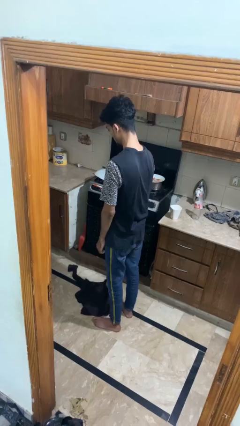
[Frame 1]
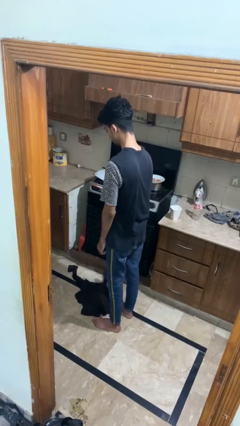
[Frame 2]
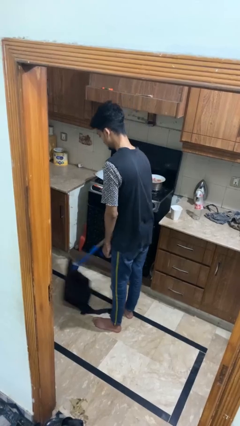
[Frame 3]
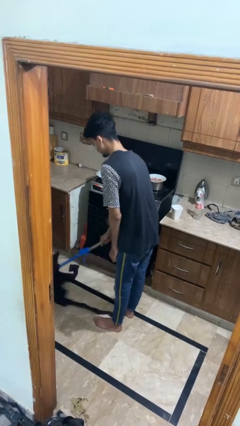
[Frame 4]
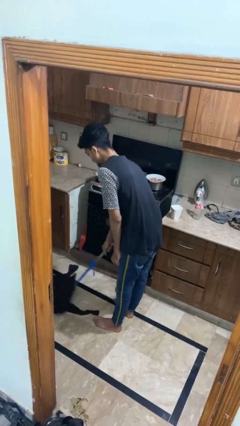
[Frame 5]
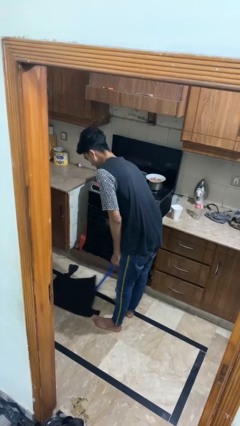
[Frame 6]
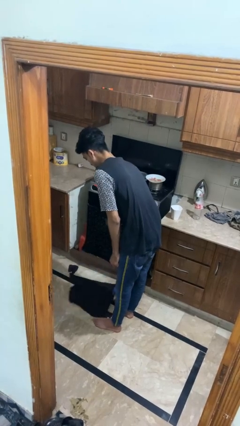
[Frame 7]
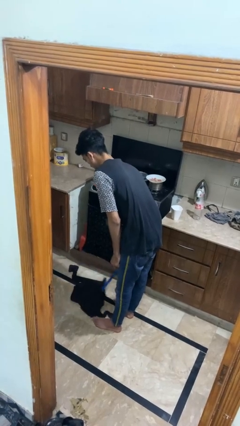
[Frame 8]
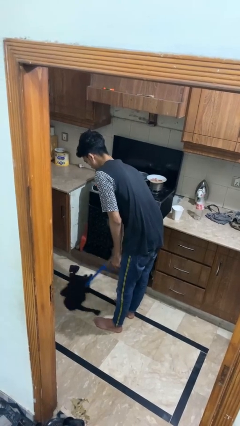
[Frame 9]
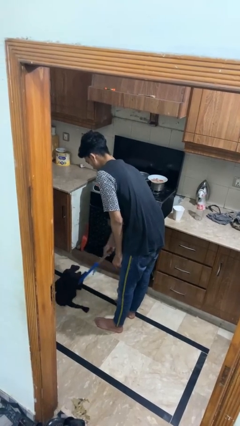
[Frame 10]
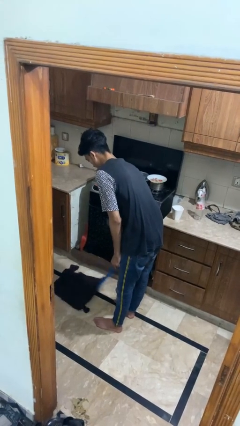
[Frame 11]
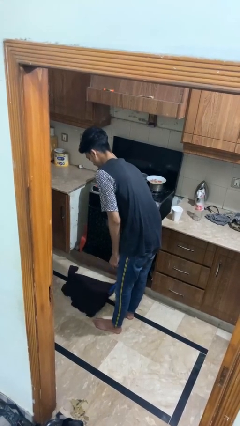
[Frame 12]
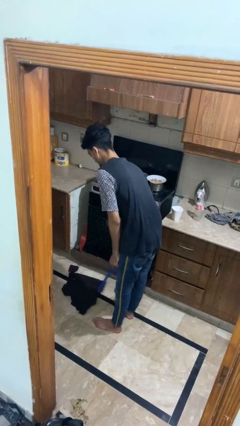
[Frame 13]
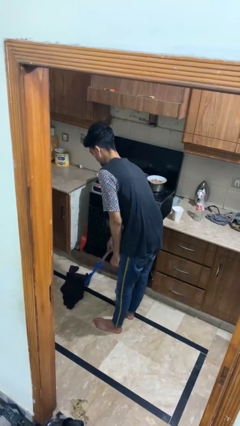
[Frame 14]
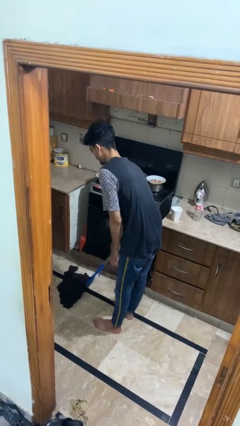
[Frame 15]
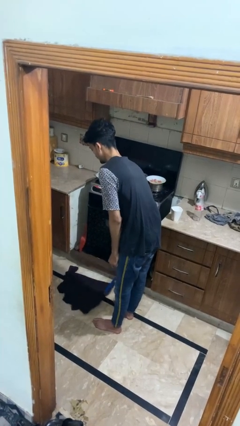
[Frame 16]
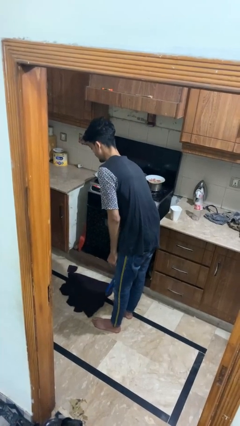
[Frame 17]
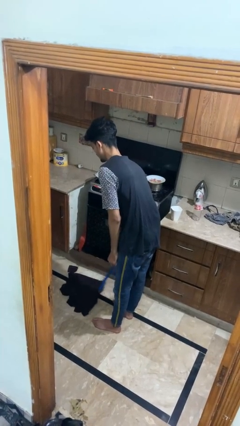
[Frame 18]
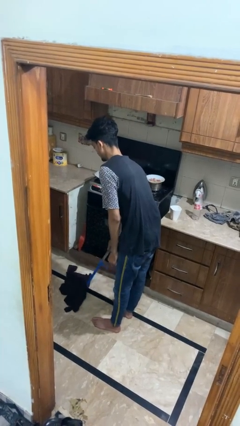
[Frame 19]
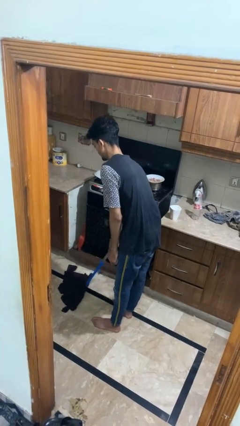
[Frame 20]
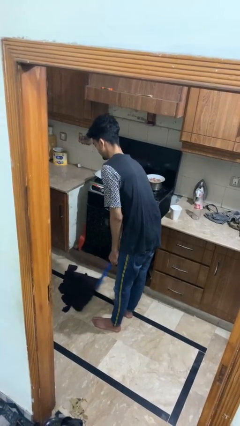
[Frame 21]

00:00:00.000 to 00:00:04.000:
person mops

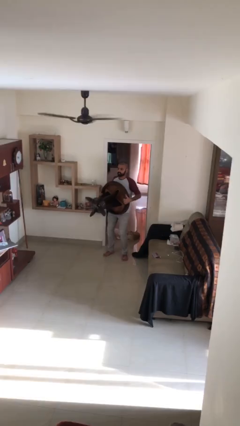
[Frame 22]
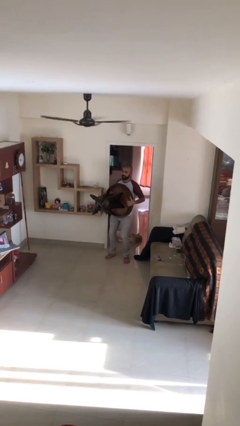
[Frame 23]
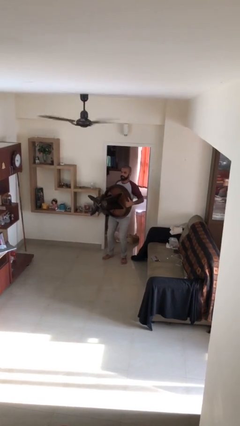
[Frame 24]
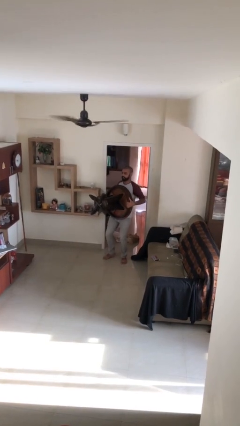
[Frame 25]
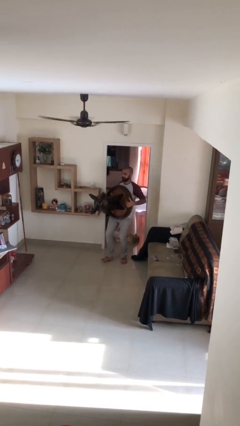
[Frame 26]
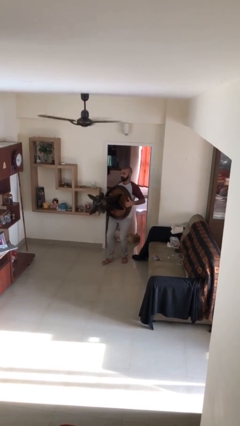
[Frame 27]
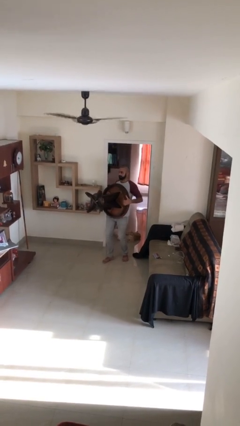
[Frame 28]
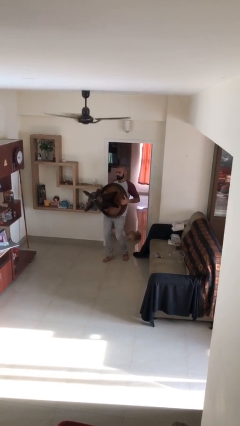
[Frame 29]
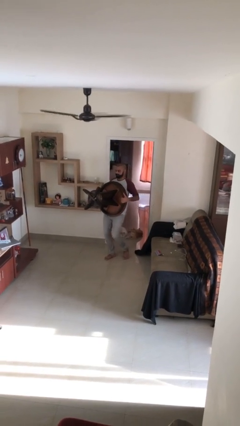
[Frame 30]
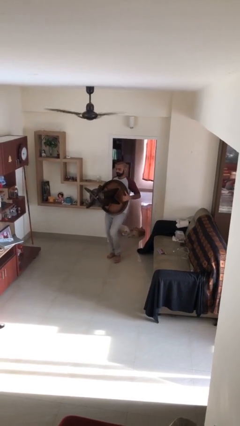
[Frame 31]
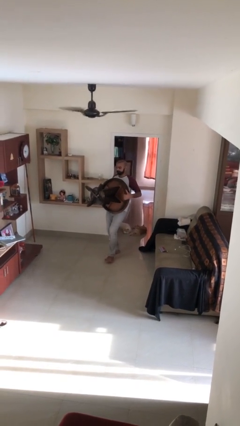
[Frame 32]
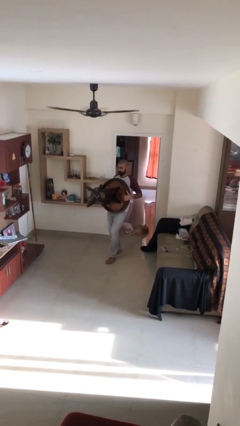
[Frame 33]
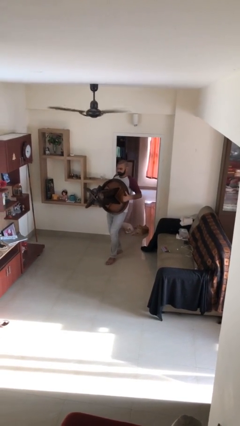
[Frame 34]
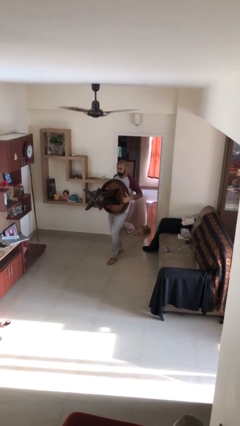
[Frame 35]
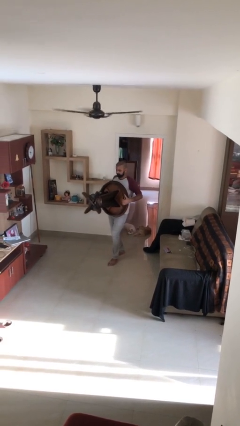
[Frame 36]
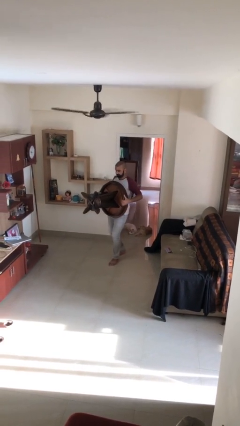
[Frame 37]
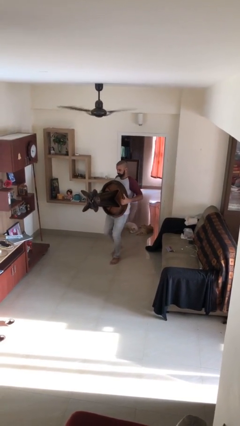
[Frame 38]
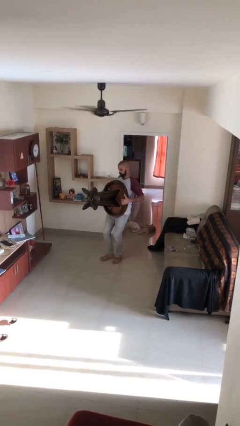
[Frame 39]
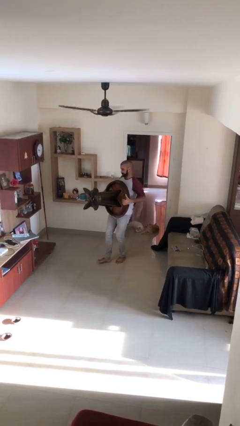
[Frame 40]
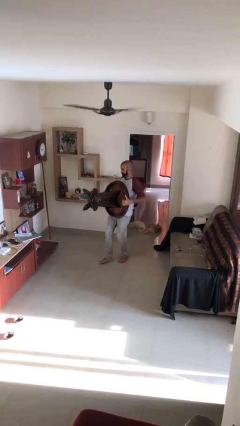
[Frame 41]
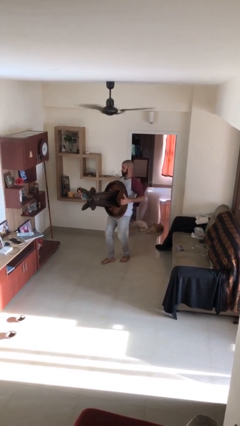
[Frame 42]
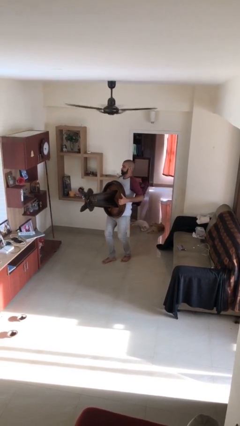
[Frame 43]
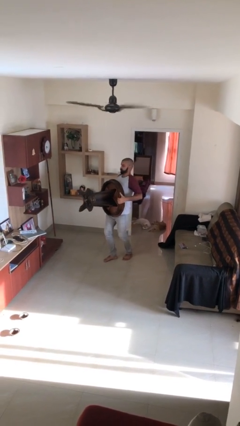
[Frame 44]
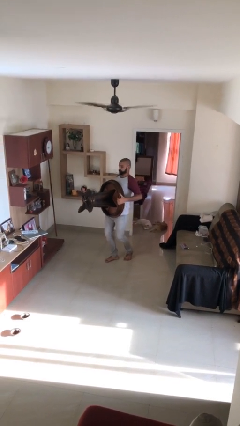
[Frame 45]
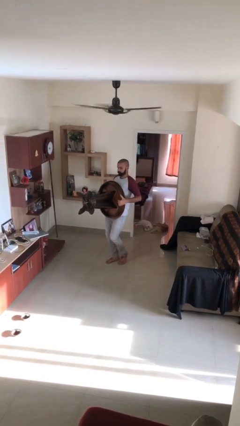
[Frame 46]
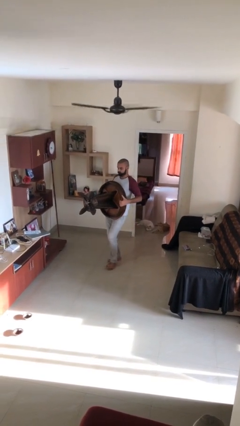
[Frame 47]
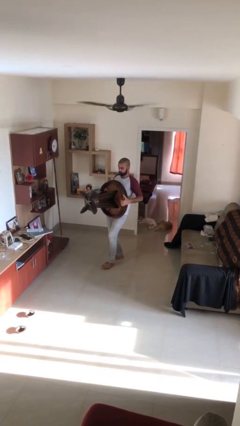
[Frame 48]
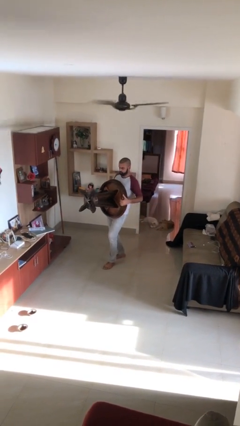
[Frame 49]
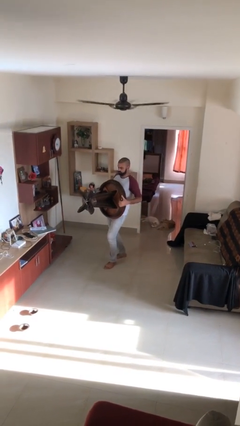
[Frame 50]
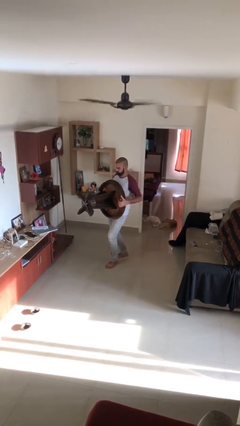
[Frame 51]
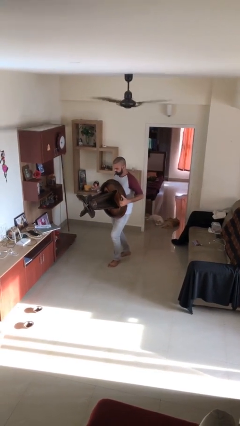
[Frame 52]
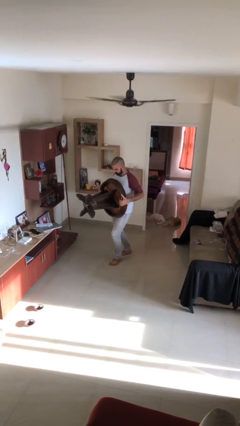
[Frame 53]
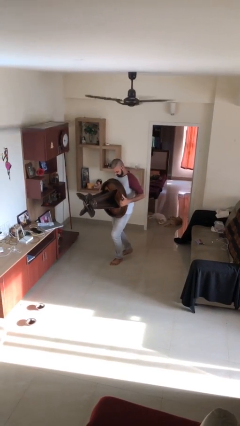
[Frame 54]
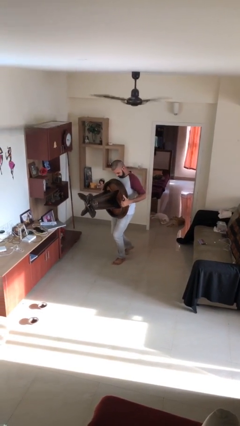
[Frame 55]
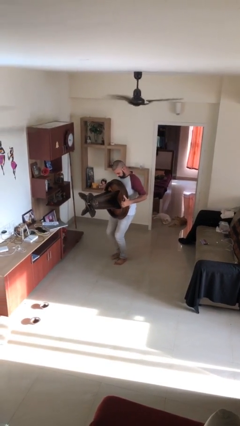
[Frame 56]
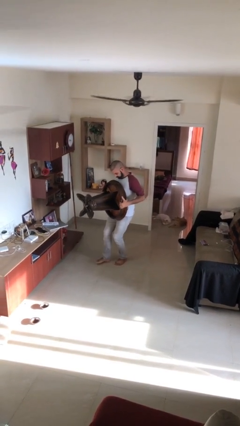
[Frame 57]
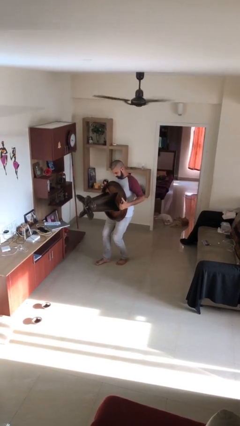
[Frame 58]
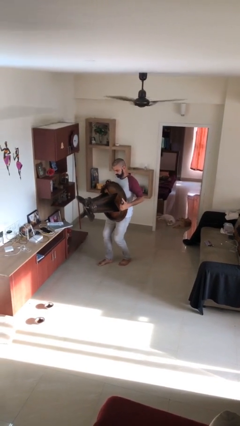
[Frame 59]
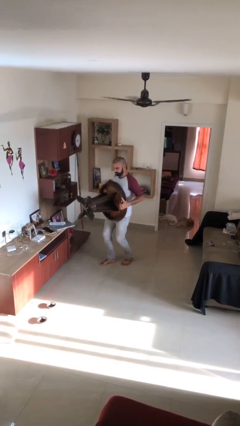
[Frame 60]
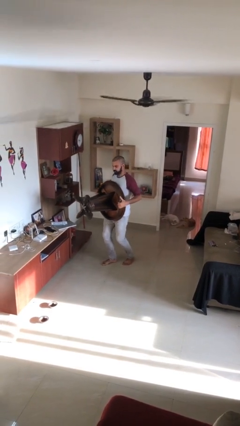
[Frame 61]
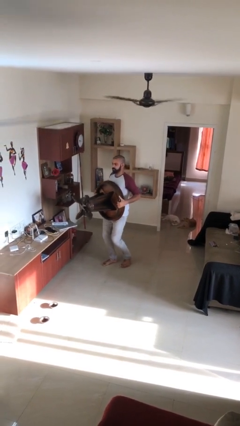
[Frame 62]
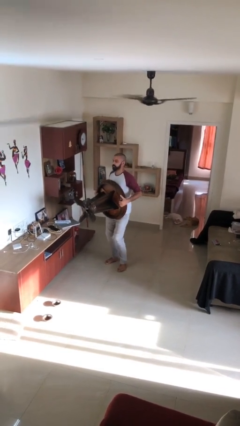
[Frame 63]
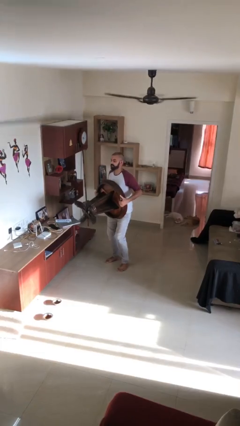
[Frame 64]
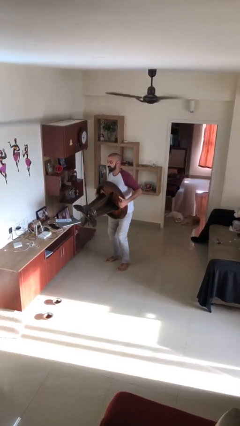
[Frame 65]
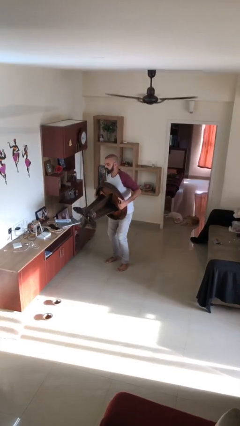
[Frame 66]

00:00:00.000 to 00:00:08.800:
person carries heavy object

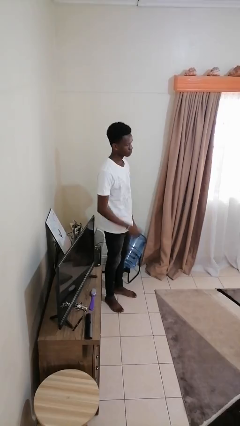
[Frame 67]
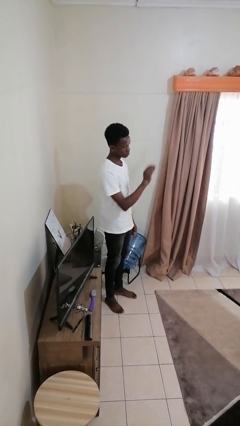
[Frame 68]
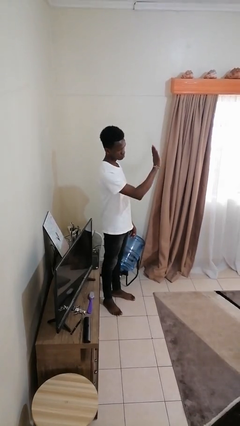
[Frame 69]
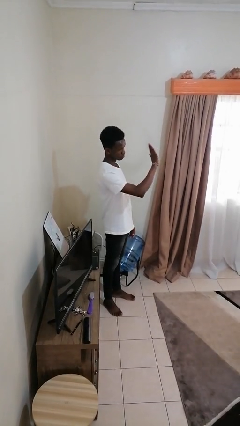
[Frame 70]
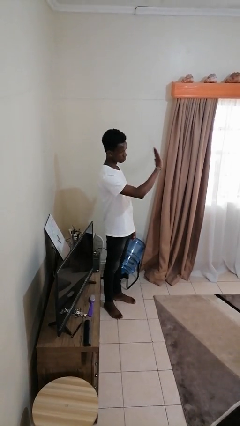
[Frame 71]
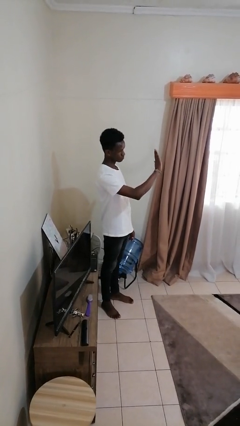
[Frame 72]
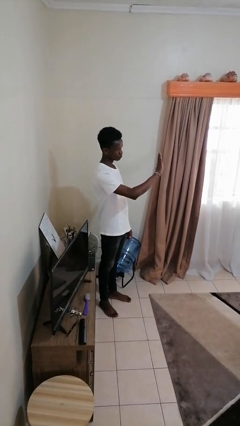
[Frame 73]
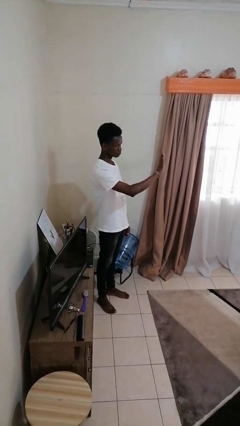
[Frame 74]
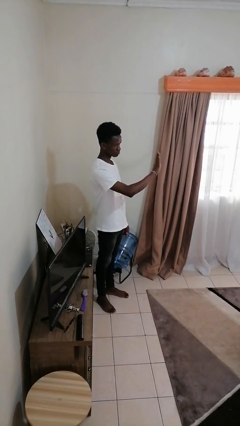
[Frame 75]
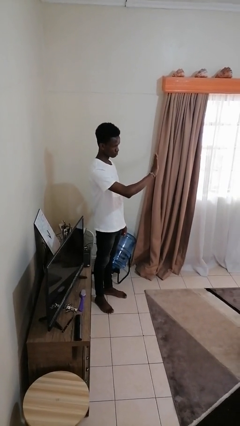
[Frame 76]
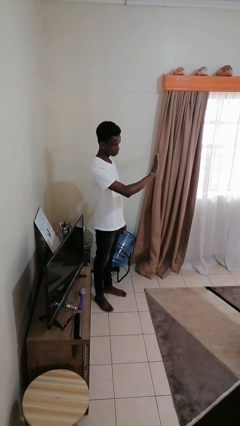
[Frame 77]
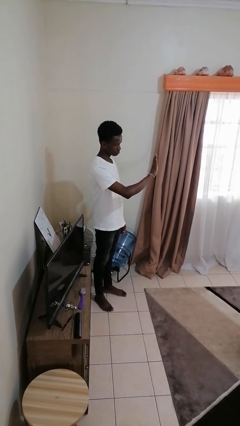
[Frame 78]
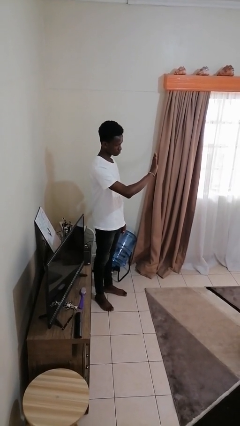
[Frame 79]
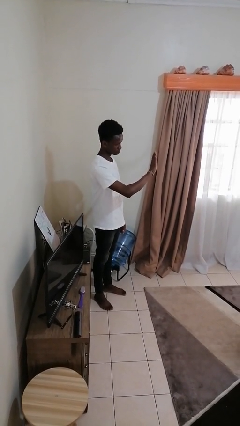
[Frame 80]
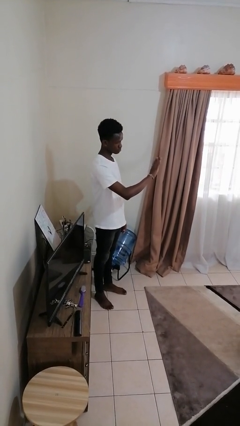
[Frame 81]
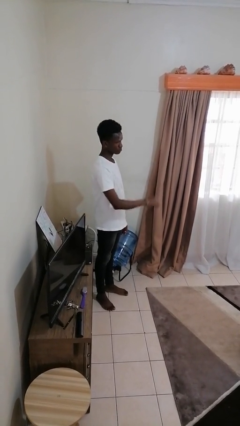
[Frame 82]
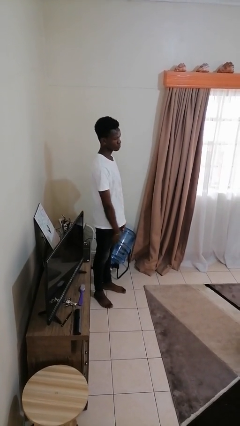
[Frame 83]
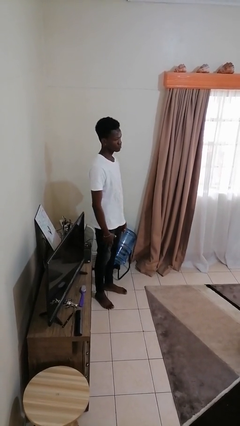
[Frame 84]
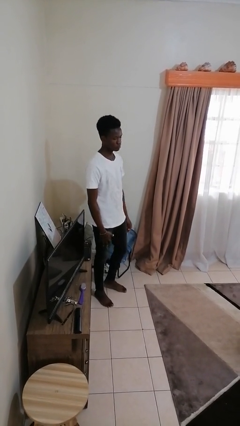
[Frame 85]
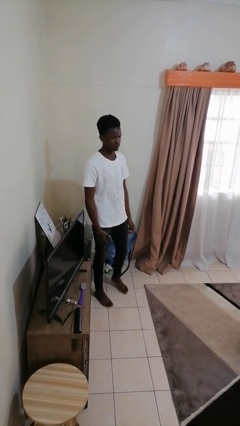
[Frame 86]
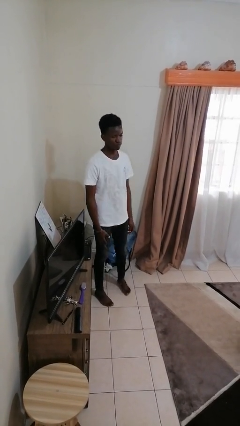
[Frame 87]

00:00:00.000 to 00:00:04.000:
person gestures stop

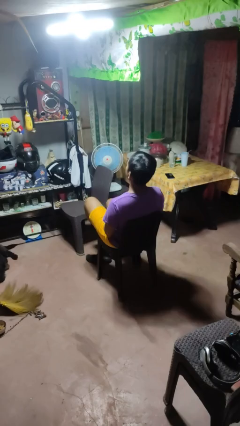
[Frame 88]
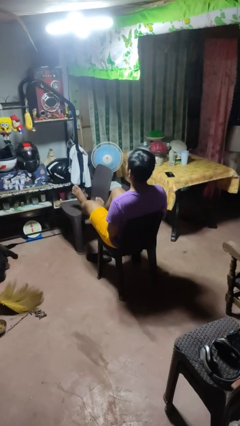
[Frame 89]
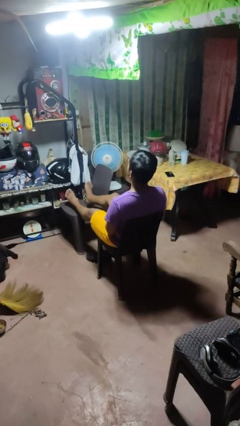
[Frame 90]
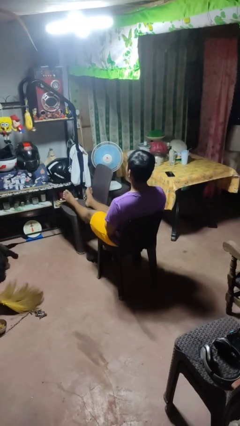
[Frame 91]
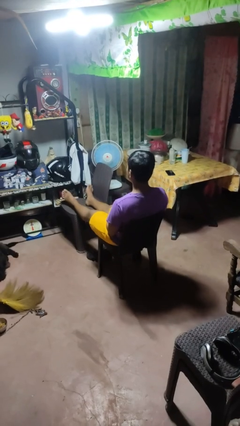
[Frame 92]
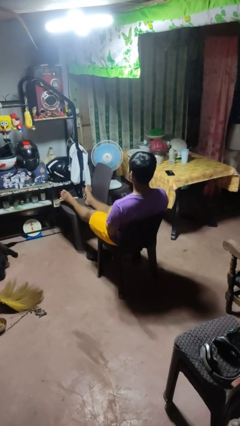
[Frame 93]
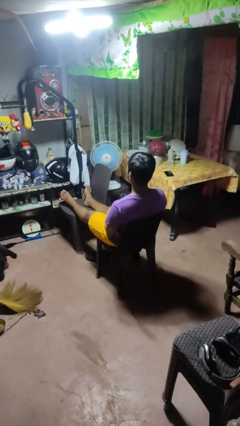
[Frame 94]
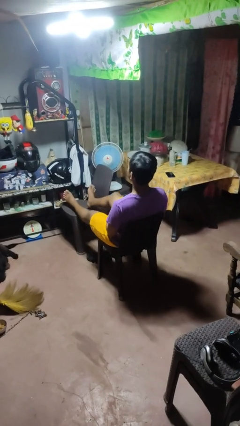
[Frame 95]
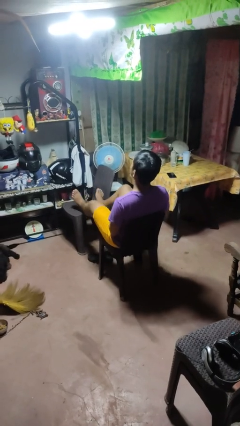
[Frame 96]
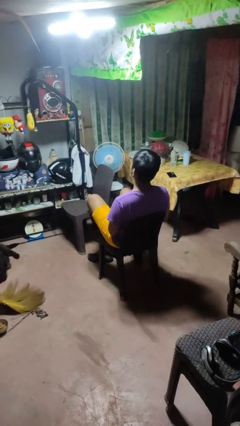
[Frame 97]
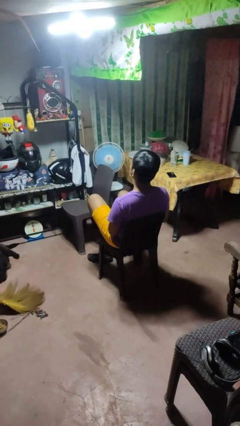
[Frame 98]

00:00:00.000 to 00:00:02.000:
person puts feet up
